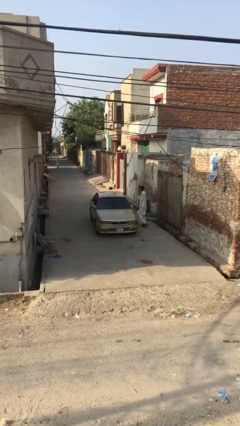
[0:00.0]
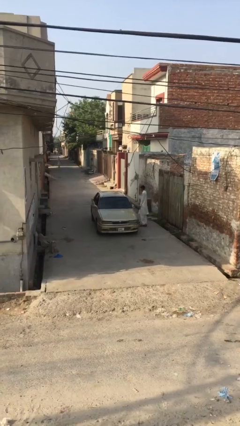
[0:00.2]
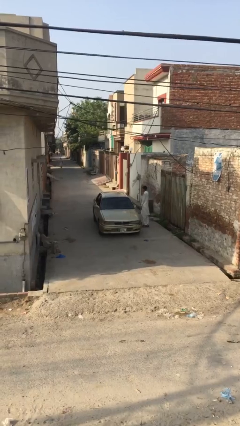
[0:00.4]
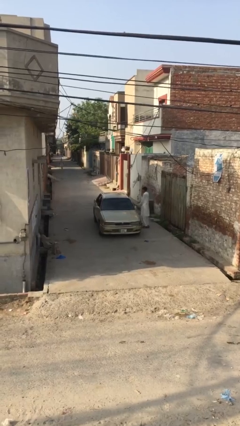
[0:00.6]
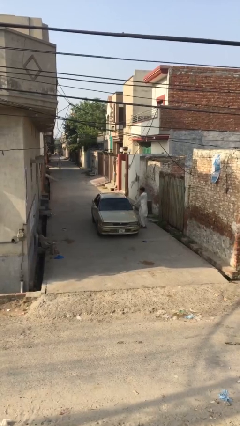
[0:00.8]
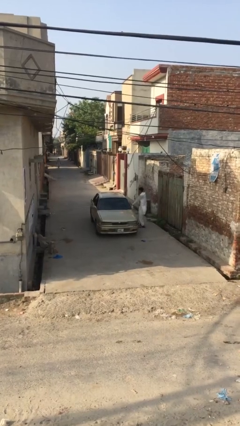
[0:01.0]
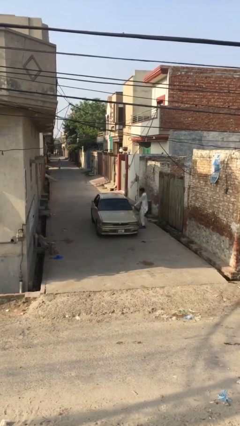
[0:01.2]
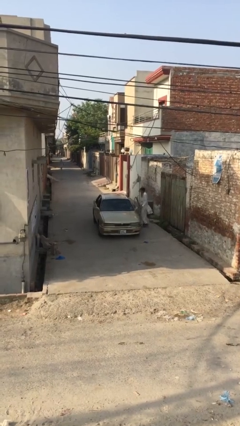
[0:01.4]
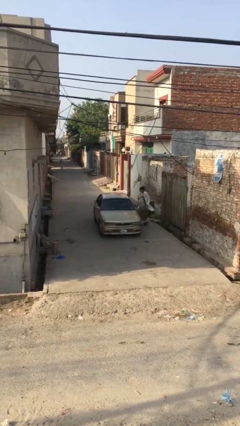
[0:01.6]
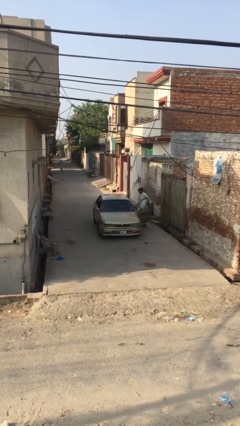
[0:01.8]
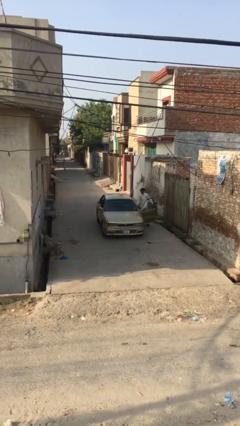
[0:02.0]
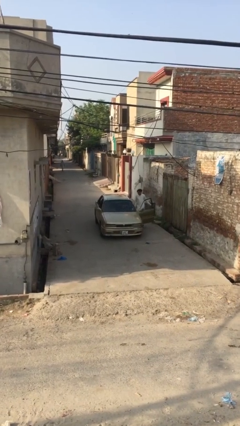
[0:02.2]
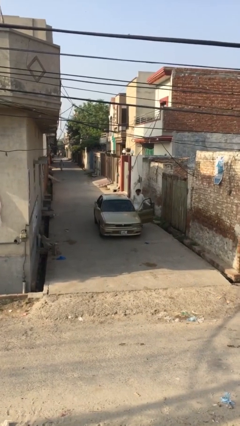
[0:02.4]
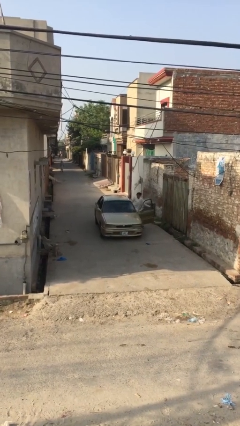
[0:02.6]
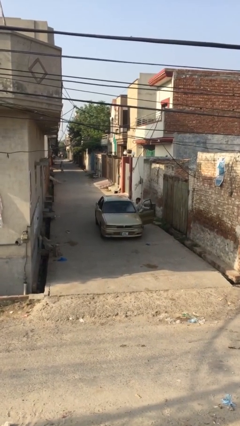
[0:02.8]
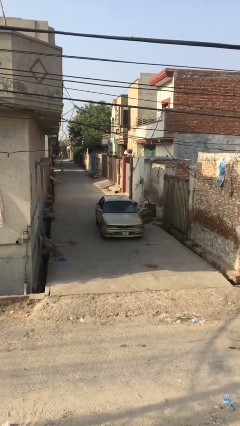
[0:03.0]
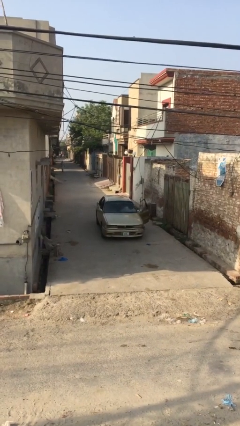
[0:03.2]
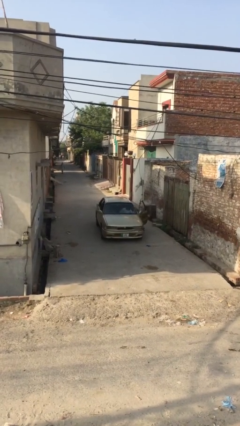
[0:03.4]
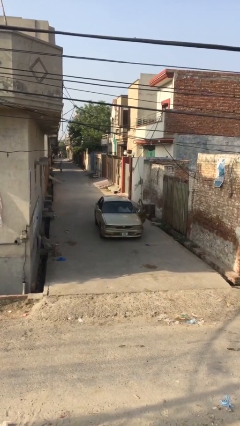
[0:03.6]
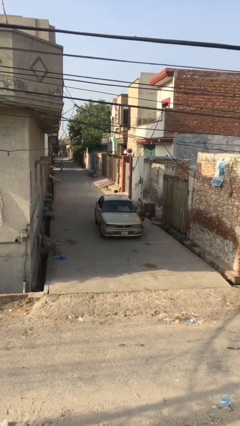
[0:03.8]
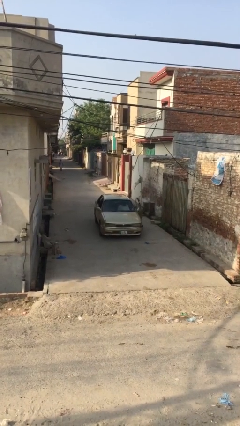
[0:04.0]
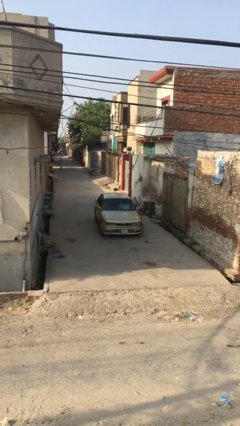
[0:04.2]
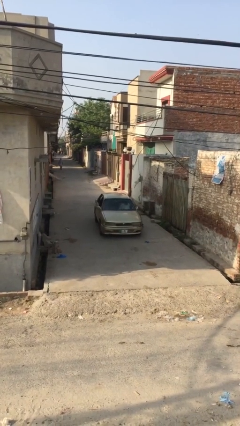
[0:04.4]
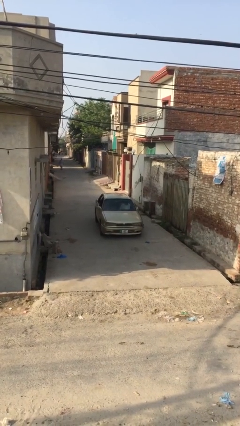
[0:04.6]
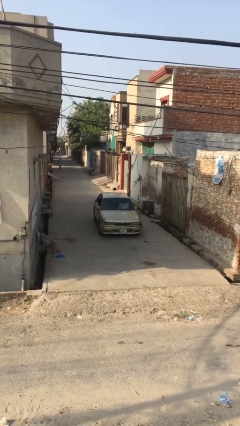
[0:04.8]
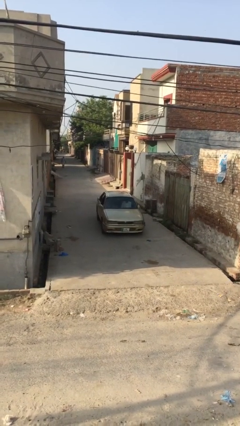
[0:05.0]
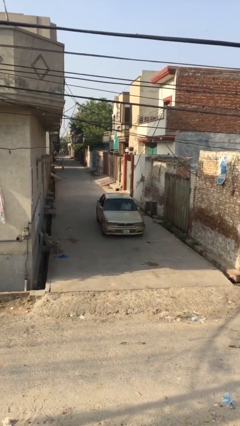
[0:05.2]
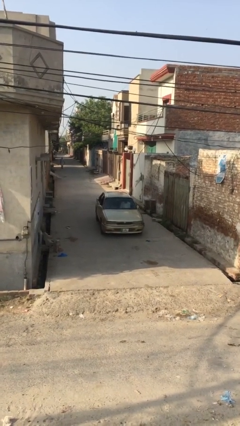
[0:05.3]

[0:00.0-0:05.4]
car picks up person

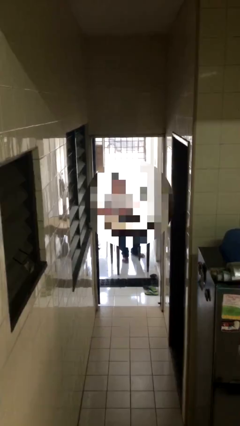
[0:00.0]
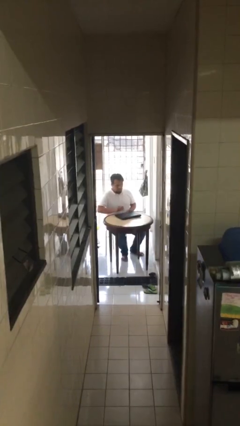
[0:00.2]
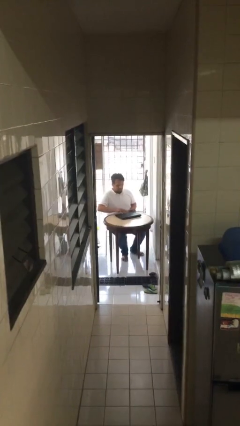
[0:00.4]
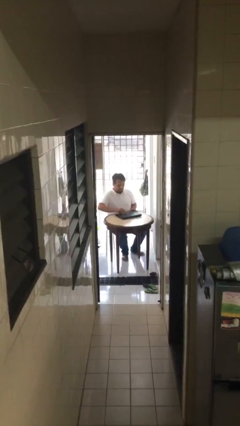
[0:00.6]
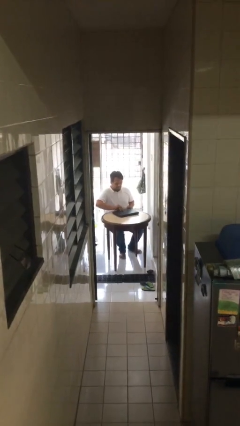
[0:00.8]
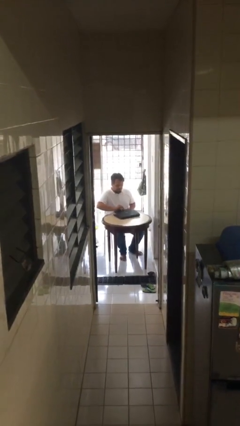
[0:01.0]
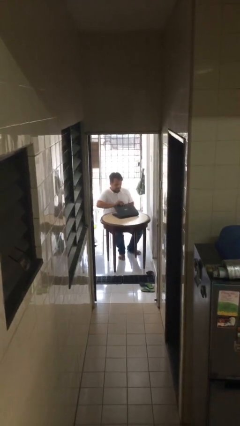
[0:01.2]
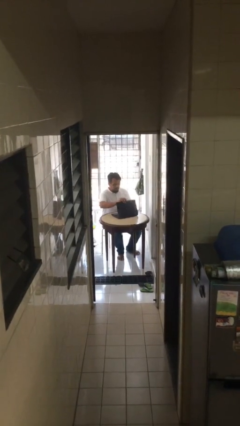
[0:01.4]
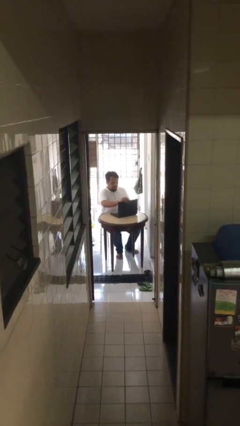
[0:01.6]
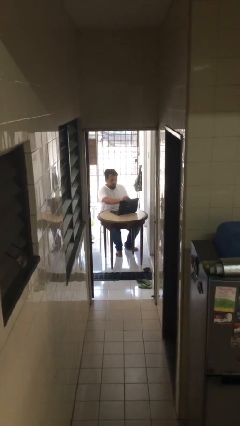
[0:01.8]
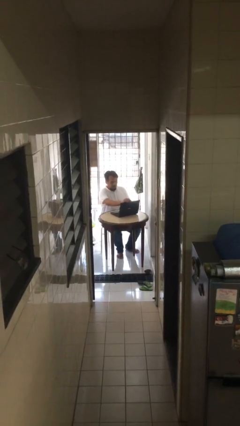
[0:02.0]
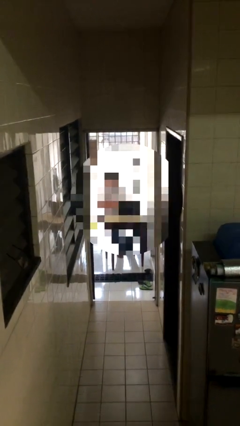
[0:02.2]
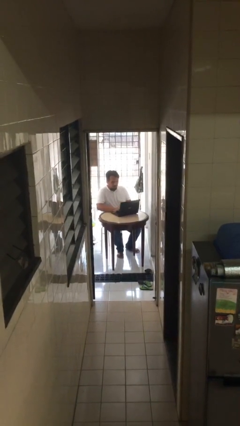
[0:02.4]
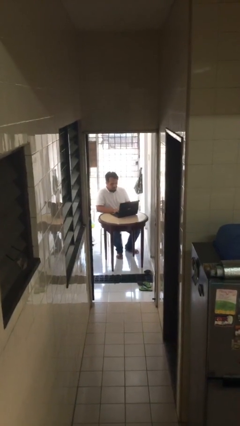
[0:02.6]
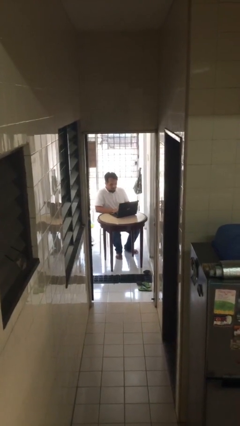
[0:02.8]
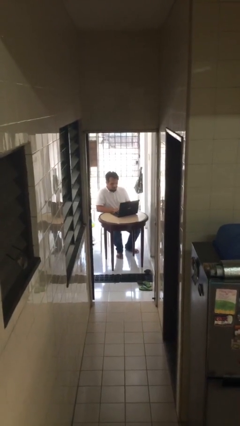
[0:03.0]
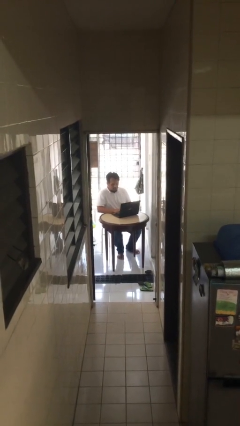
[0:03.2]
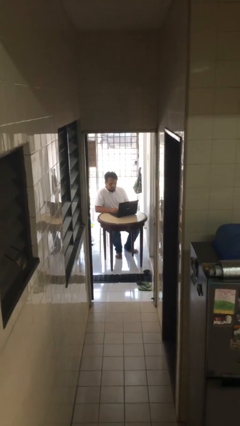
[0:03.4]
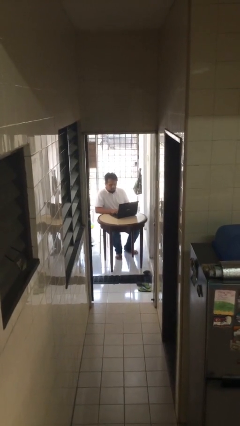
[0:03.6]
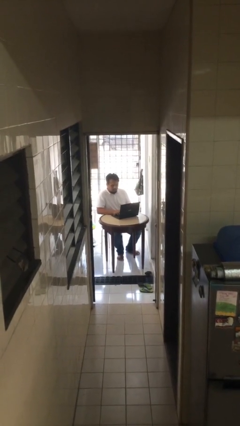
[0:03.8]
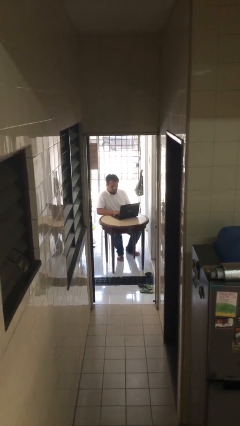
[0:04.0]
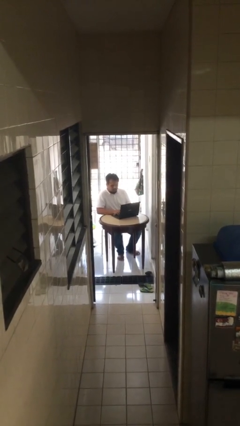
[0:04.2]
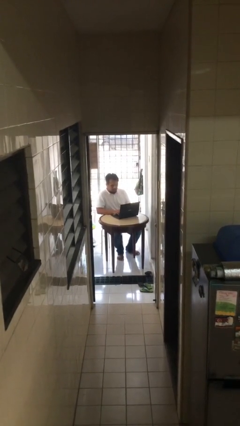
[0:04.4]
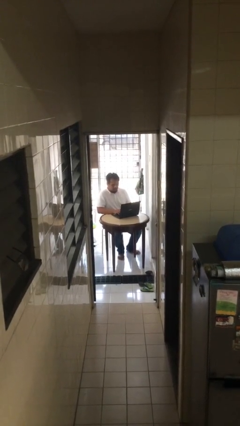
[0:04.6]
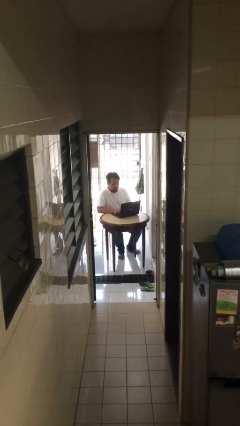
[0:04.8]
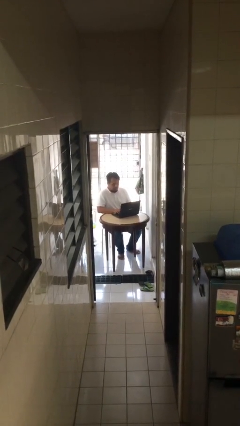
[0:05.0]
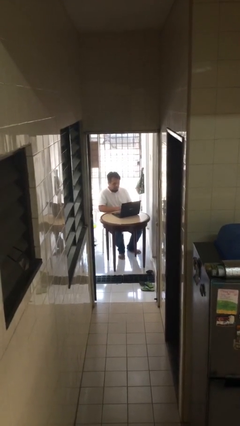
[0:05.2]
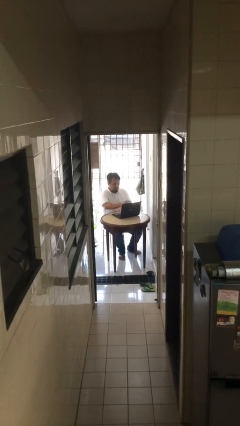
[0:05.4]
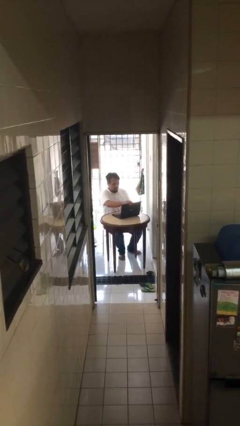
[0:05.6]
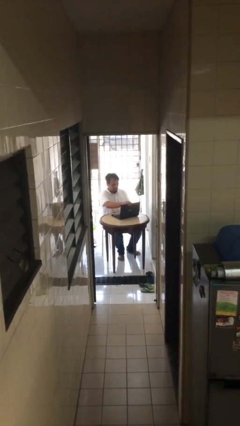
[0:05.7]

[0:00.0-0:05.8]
person interacts with laptop

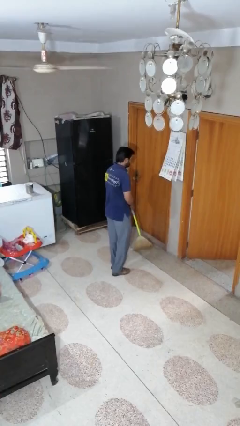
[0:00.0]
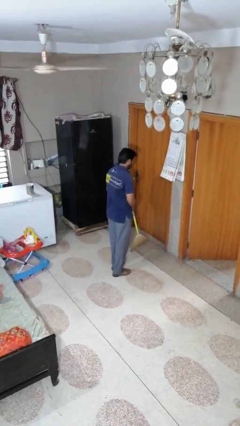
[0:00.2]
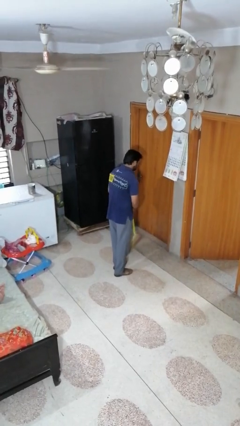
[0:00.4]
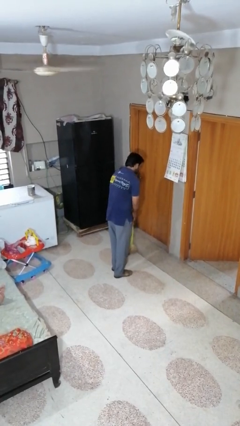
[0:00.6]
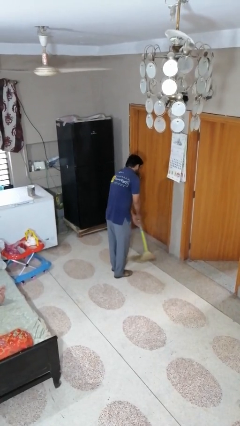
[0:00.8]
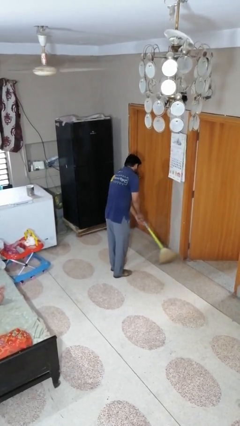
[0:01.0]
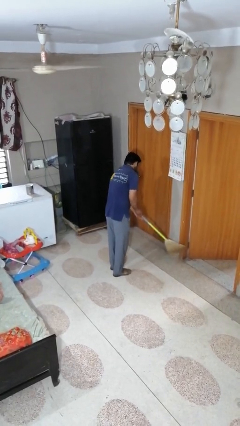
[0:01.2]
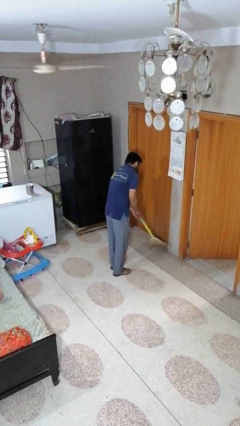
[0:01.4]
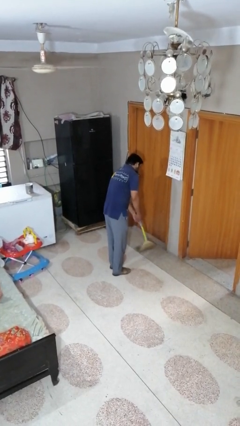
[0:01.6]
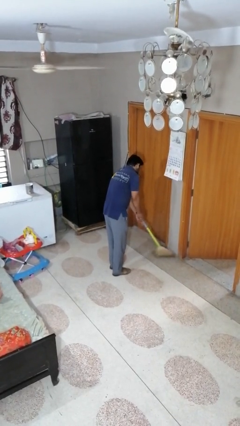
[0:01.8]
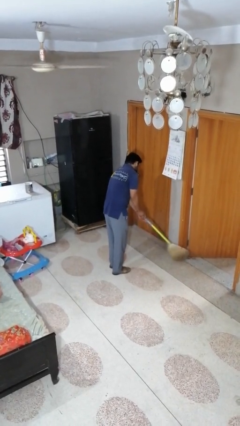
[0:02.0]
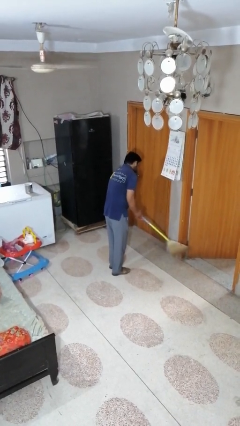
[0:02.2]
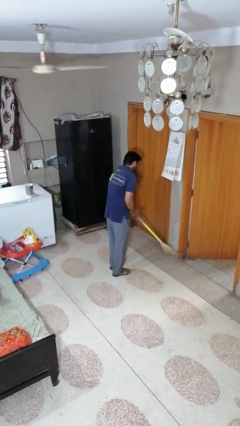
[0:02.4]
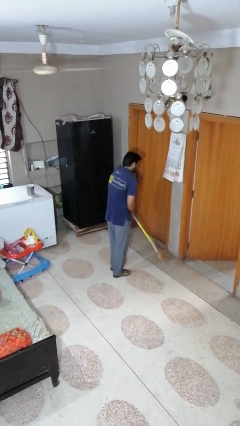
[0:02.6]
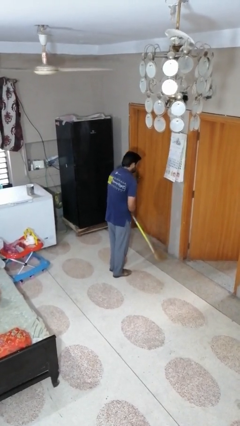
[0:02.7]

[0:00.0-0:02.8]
person sweeps floor

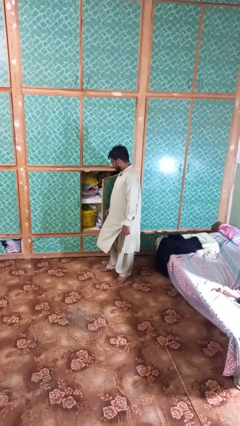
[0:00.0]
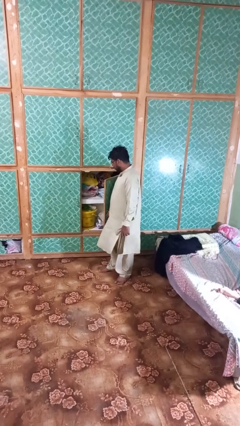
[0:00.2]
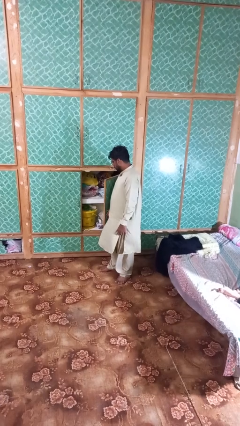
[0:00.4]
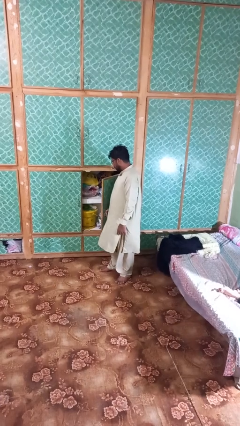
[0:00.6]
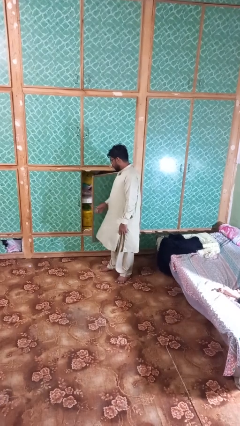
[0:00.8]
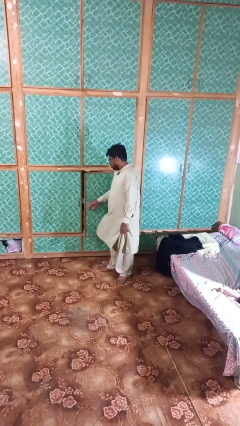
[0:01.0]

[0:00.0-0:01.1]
person closes closet door

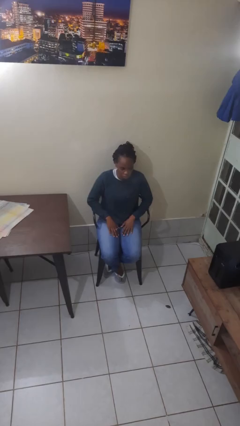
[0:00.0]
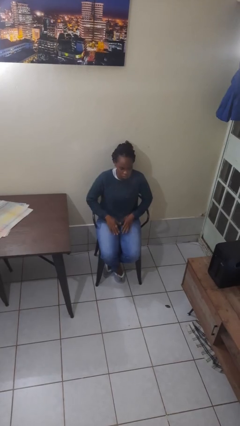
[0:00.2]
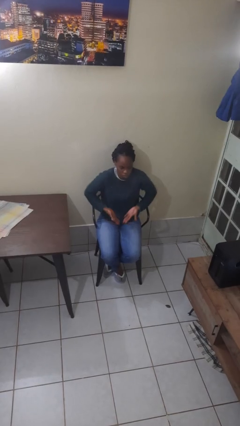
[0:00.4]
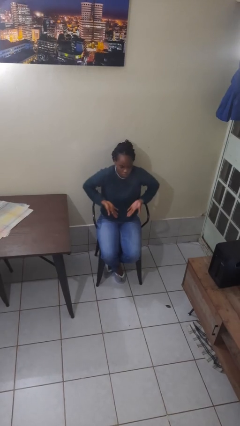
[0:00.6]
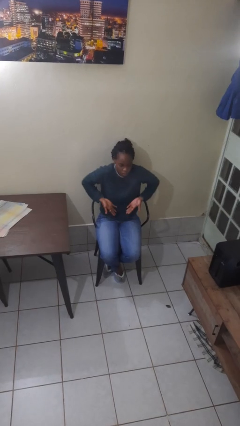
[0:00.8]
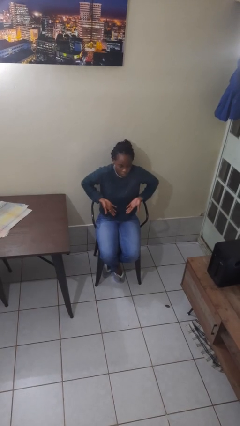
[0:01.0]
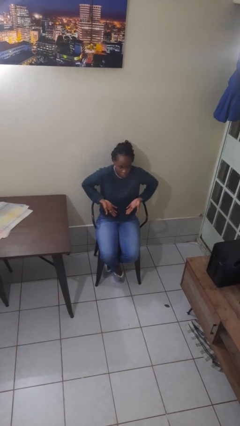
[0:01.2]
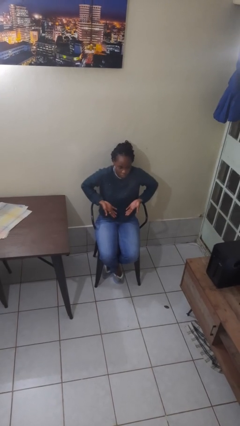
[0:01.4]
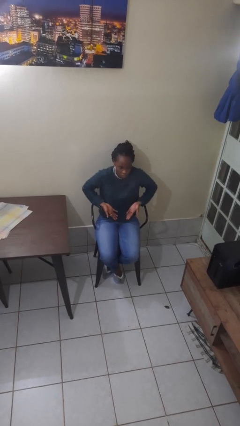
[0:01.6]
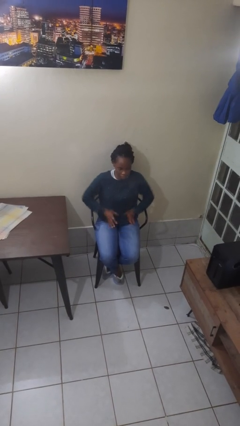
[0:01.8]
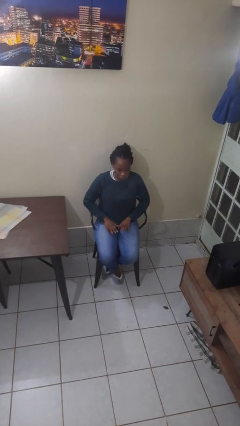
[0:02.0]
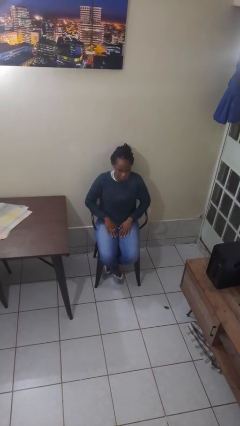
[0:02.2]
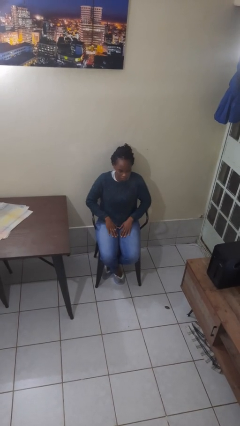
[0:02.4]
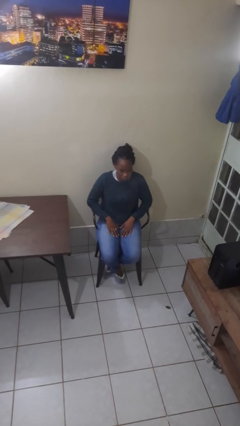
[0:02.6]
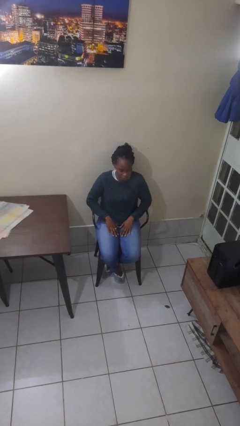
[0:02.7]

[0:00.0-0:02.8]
person shrugs
